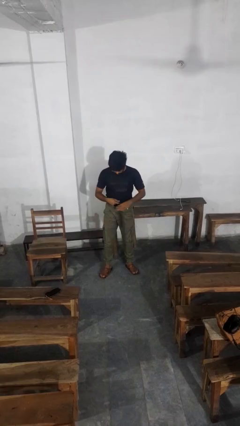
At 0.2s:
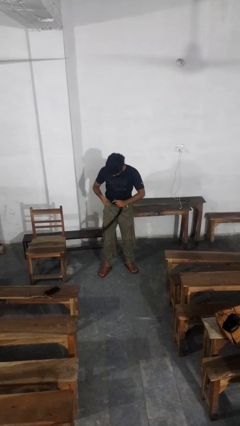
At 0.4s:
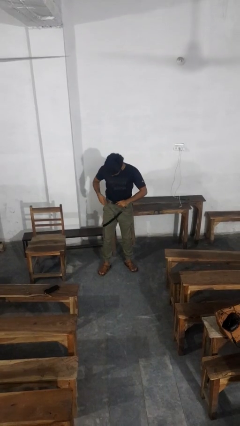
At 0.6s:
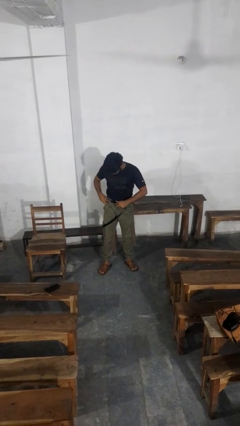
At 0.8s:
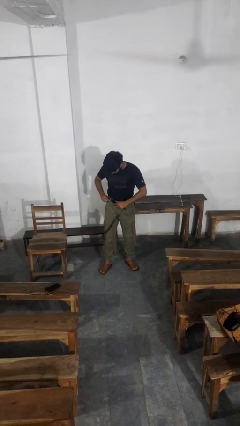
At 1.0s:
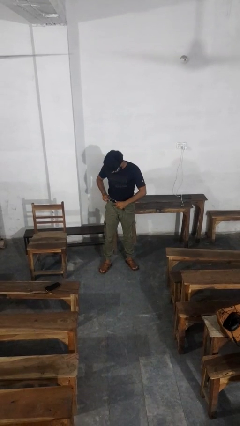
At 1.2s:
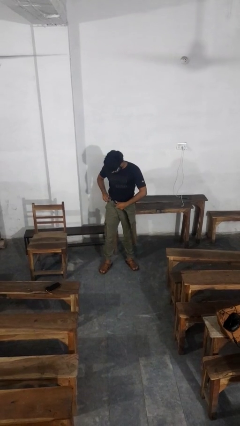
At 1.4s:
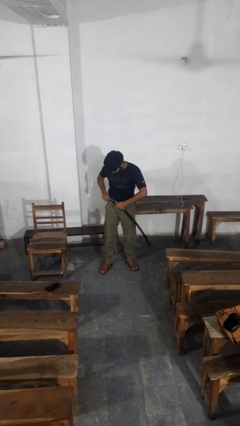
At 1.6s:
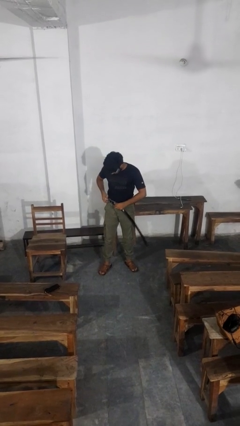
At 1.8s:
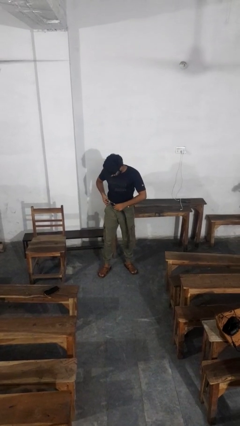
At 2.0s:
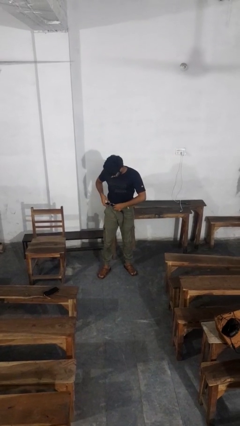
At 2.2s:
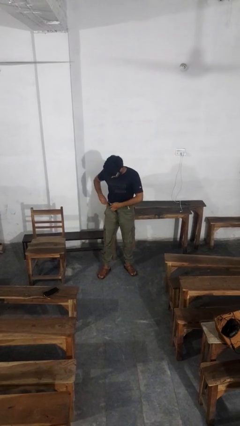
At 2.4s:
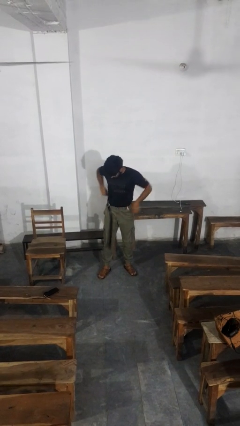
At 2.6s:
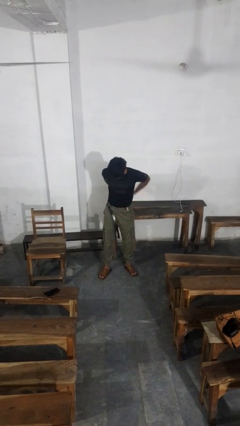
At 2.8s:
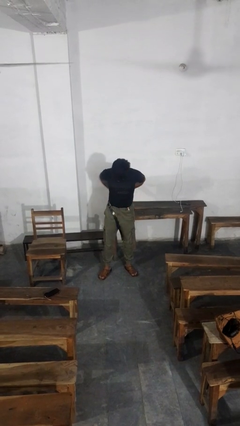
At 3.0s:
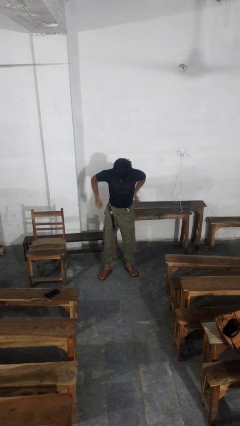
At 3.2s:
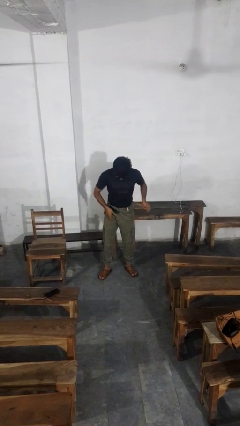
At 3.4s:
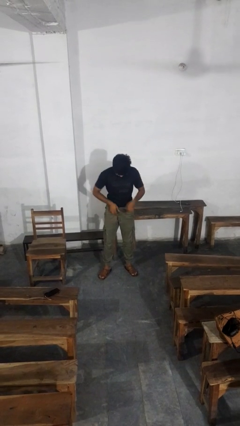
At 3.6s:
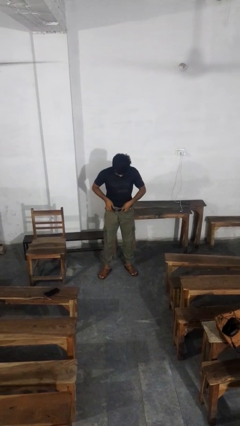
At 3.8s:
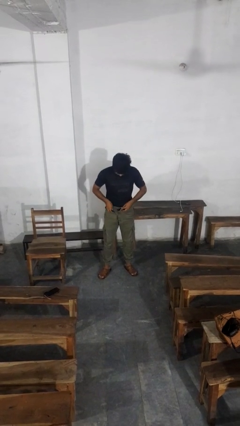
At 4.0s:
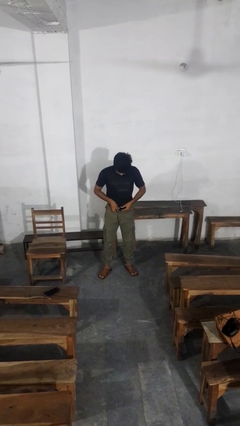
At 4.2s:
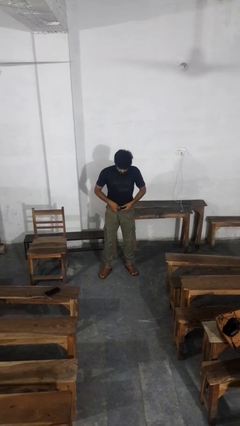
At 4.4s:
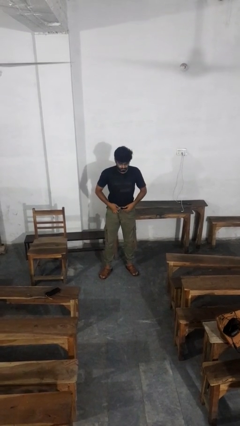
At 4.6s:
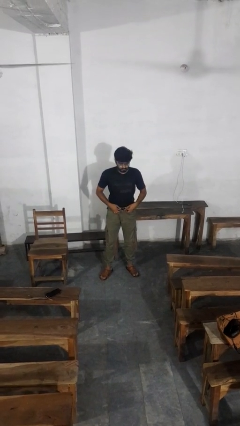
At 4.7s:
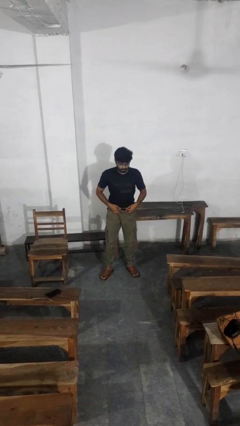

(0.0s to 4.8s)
person puts on belt

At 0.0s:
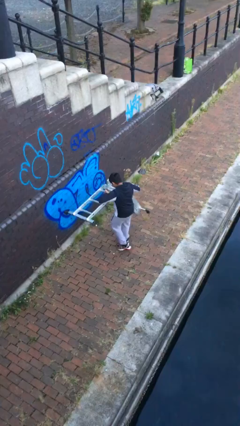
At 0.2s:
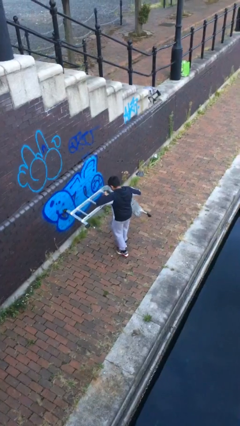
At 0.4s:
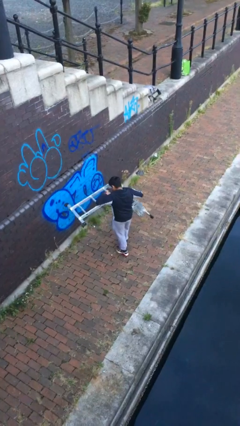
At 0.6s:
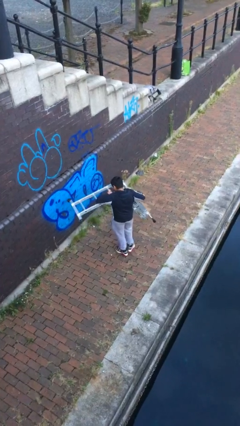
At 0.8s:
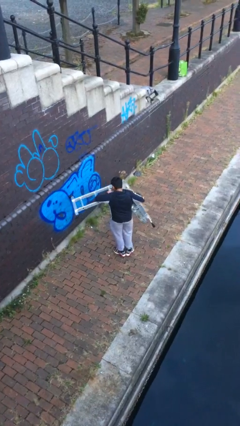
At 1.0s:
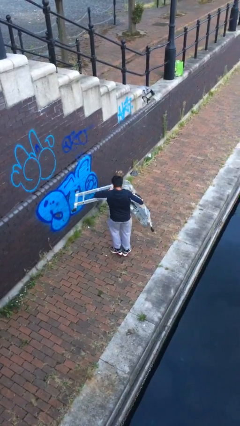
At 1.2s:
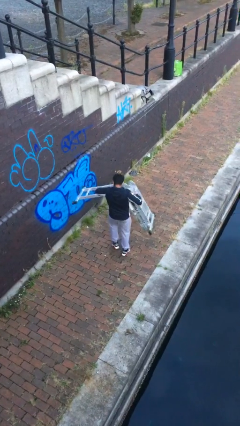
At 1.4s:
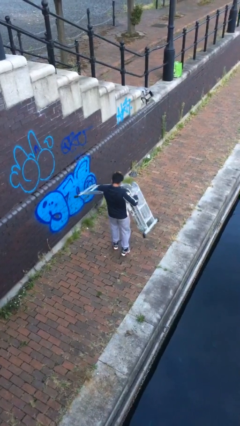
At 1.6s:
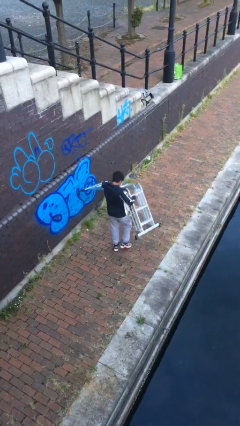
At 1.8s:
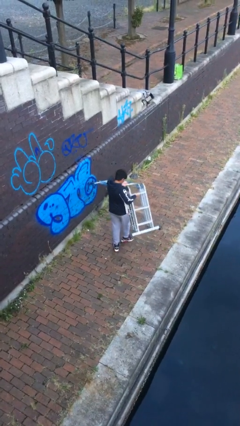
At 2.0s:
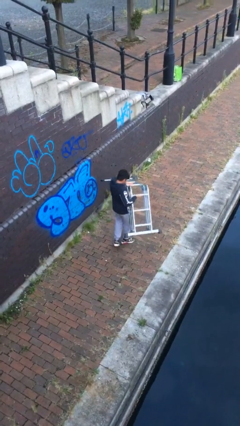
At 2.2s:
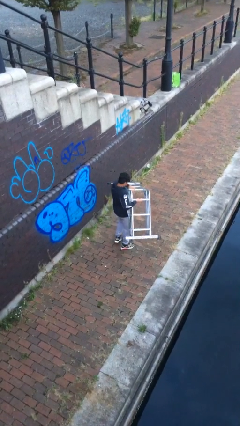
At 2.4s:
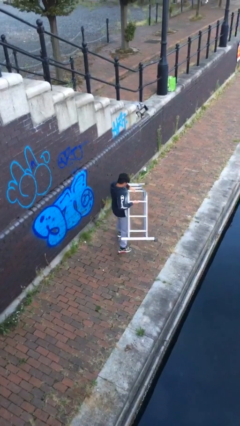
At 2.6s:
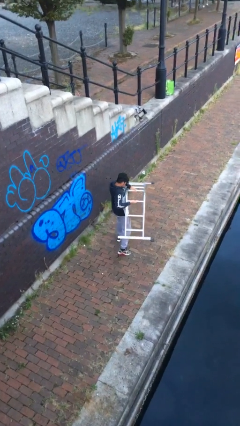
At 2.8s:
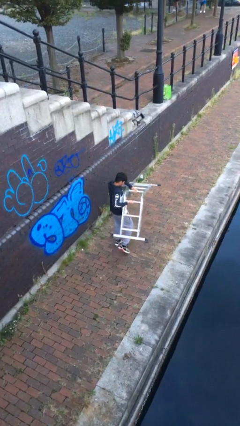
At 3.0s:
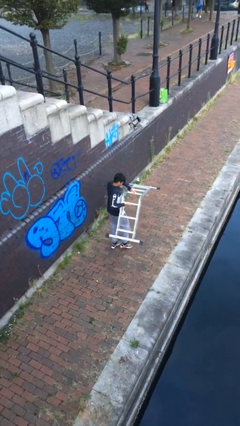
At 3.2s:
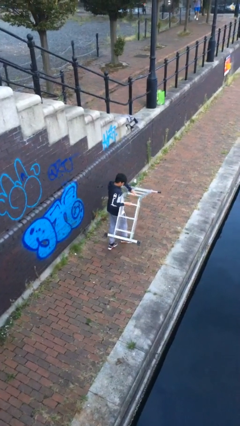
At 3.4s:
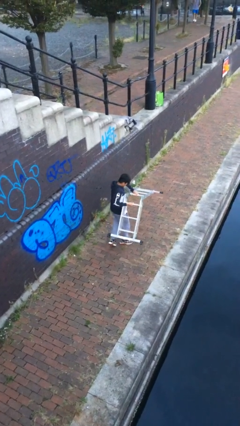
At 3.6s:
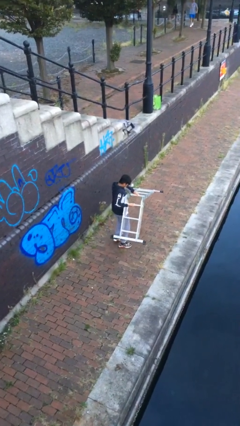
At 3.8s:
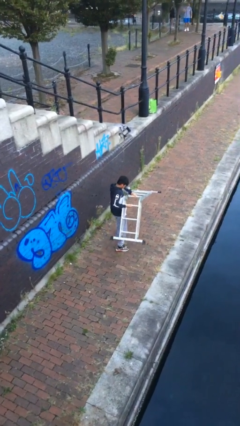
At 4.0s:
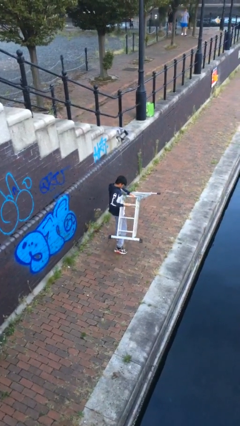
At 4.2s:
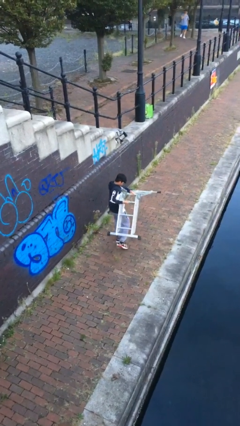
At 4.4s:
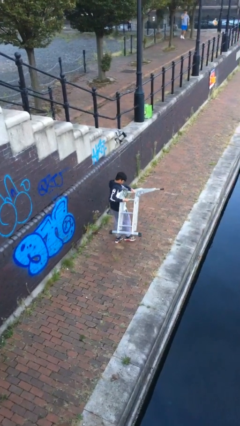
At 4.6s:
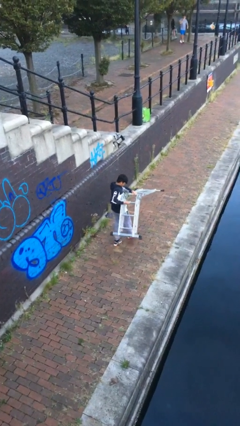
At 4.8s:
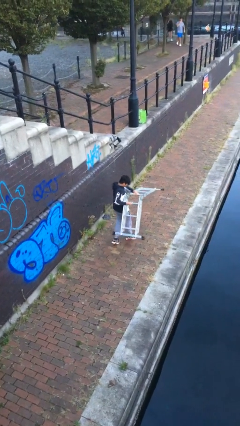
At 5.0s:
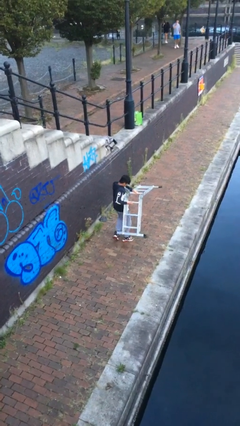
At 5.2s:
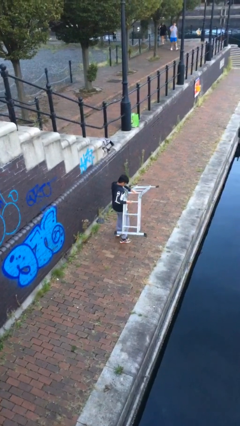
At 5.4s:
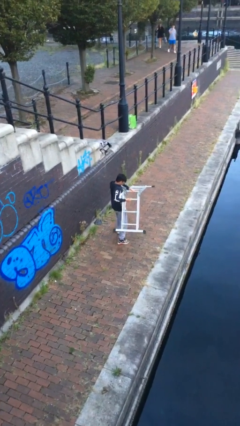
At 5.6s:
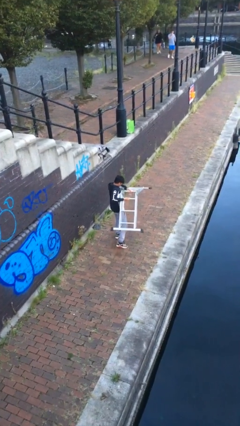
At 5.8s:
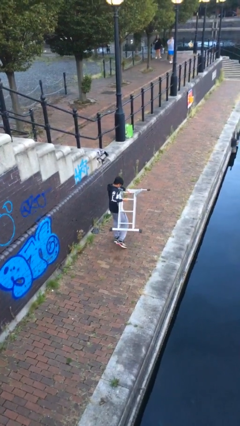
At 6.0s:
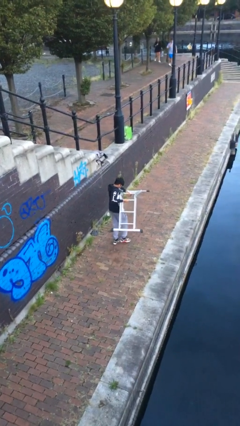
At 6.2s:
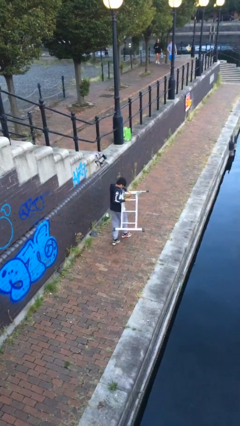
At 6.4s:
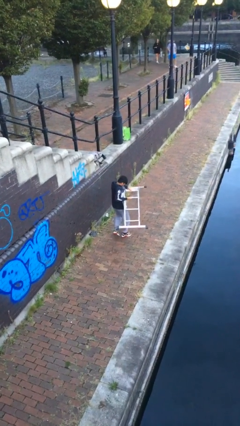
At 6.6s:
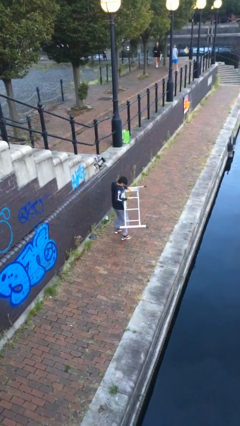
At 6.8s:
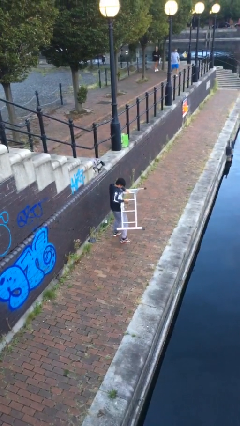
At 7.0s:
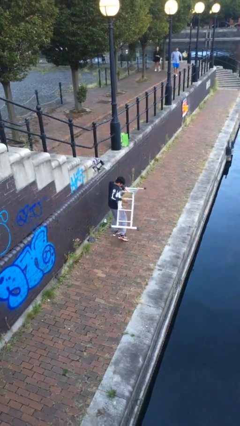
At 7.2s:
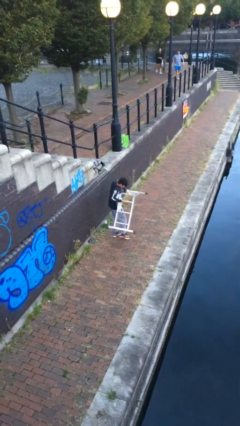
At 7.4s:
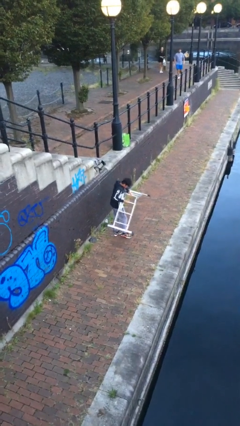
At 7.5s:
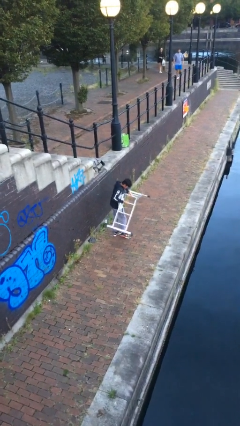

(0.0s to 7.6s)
person carries heavy object

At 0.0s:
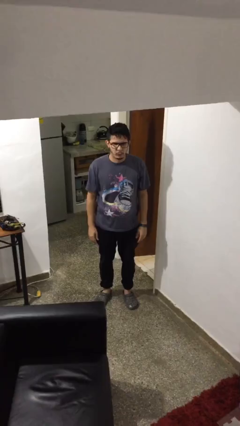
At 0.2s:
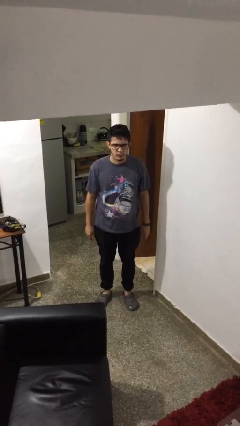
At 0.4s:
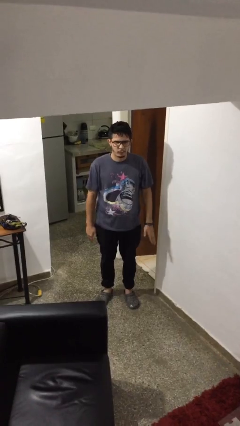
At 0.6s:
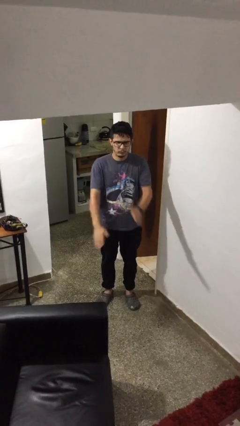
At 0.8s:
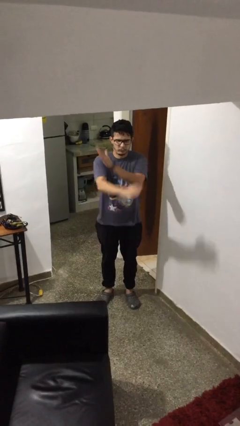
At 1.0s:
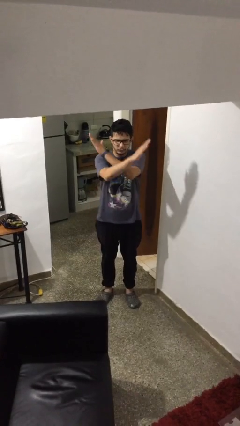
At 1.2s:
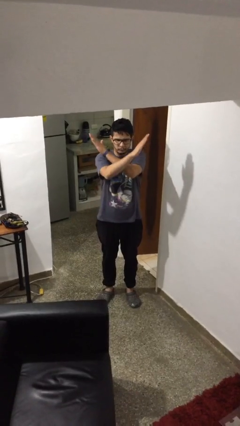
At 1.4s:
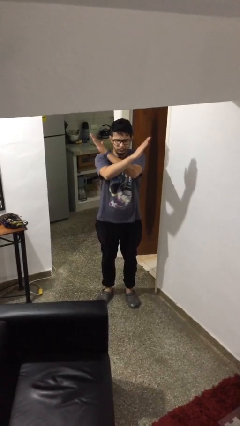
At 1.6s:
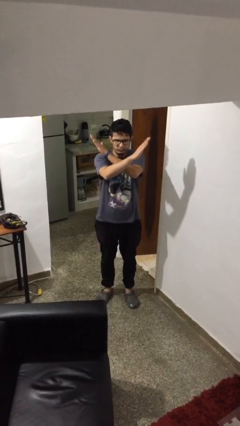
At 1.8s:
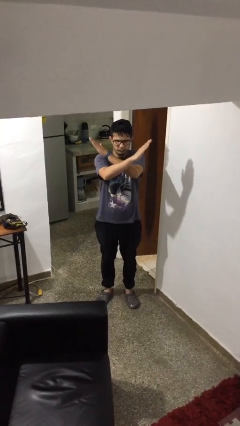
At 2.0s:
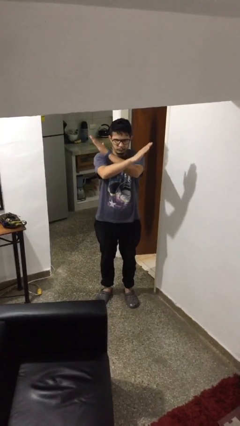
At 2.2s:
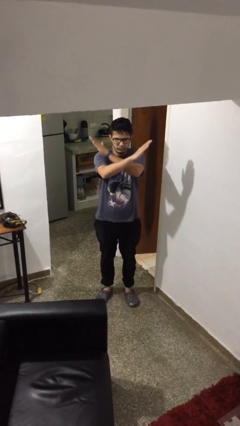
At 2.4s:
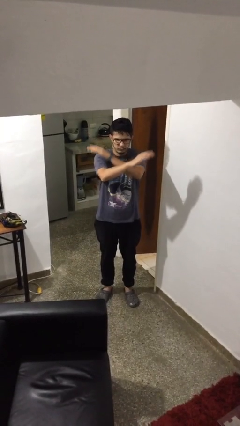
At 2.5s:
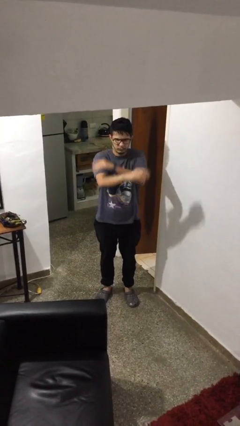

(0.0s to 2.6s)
person gestures arms x

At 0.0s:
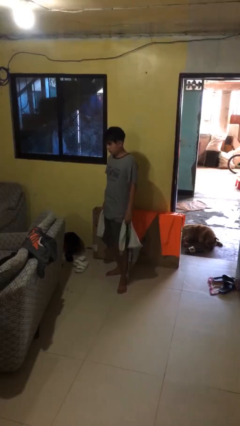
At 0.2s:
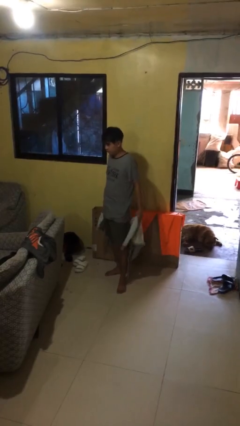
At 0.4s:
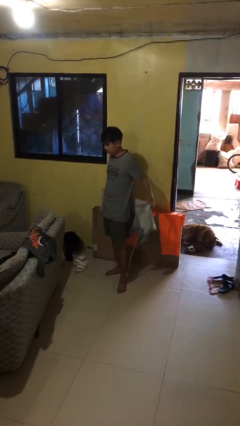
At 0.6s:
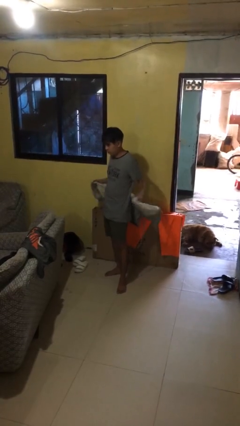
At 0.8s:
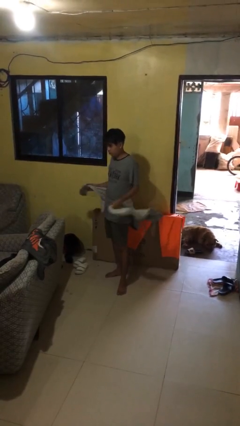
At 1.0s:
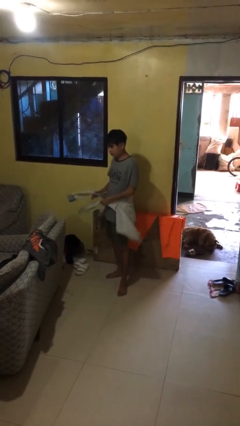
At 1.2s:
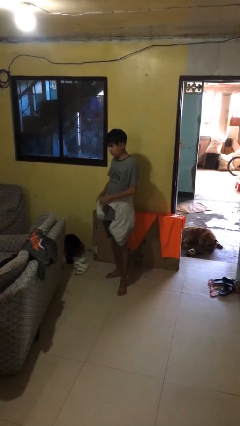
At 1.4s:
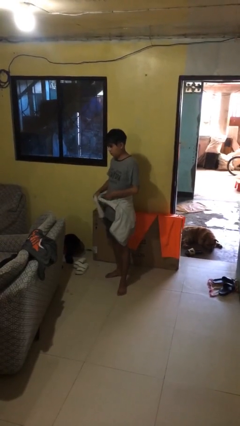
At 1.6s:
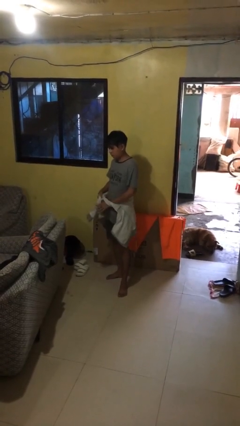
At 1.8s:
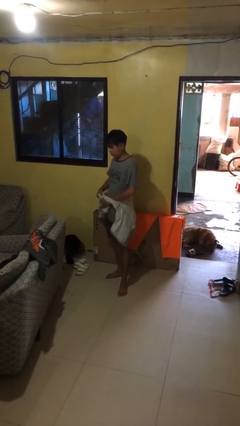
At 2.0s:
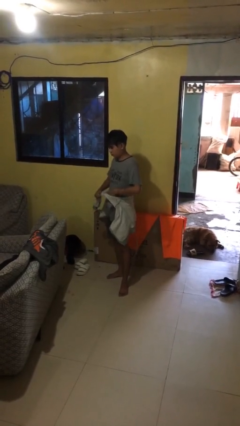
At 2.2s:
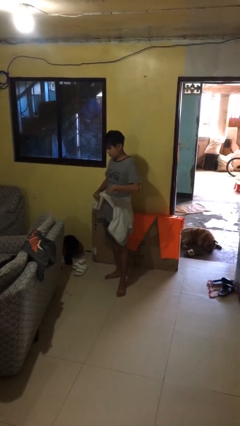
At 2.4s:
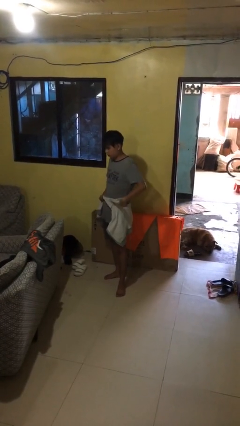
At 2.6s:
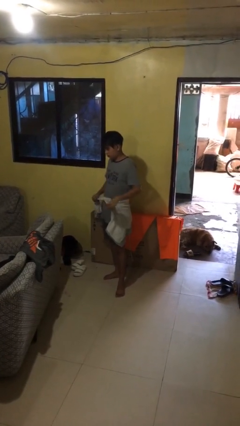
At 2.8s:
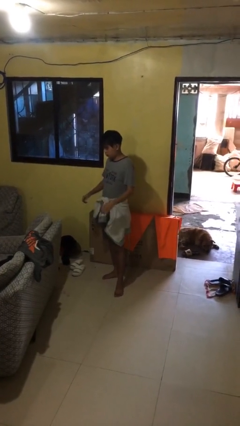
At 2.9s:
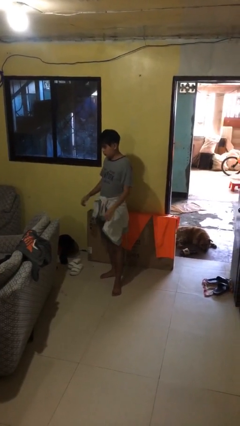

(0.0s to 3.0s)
person ties jacket around waist
